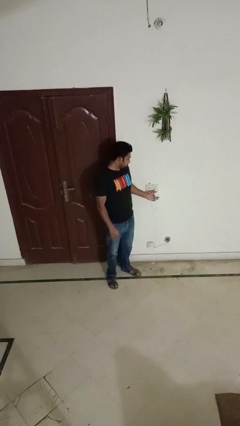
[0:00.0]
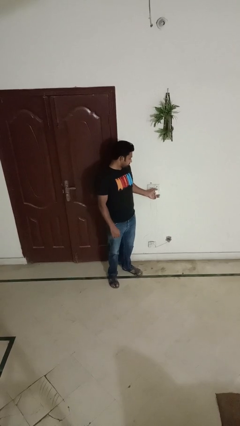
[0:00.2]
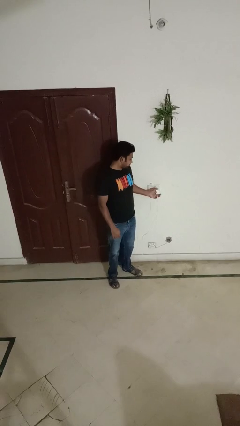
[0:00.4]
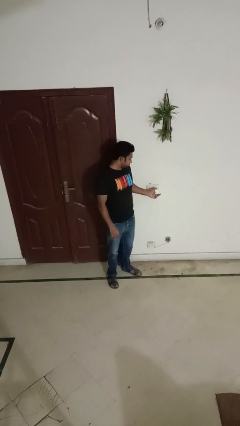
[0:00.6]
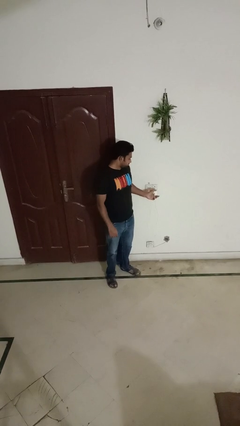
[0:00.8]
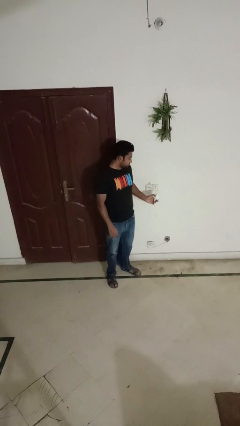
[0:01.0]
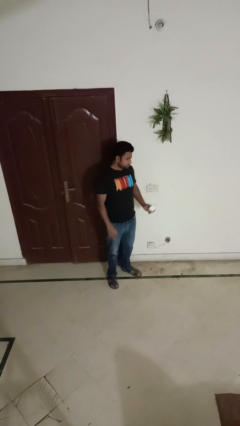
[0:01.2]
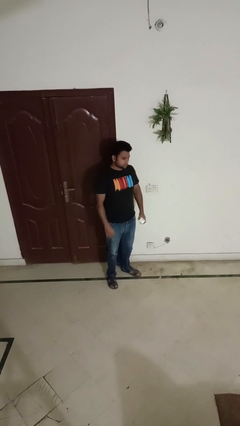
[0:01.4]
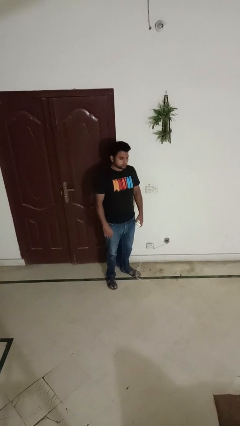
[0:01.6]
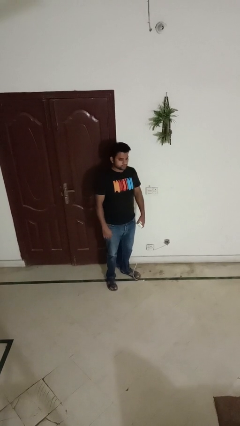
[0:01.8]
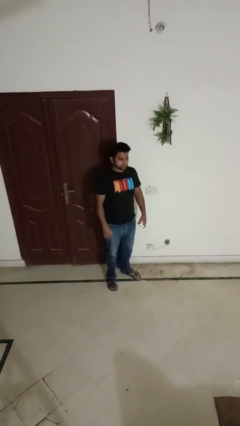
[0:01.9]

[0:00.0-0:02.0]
person unplugs from electrical socket

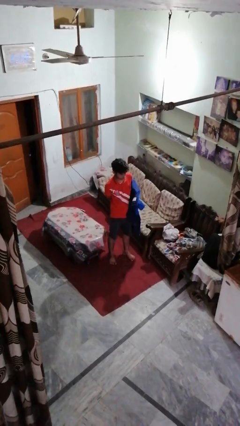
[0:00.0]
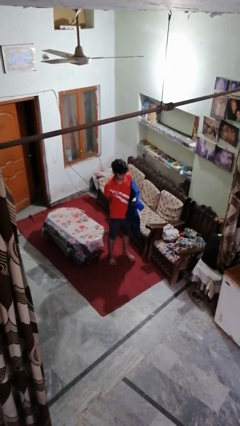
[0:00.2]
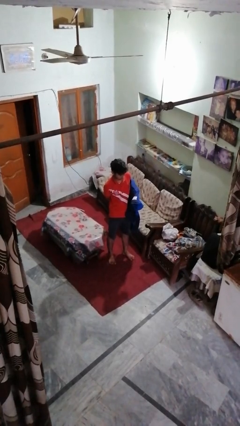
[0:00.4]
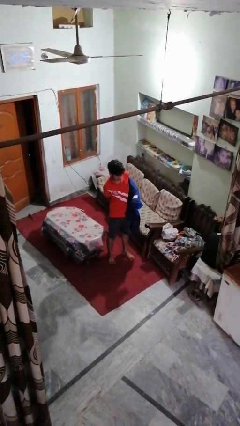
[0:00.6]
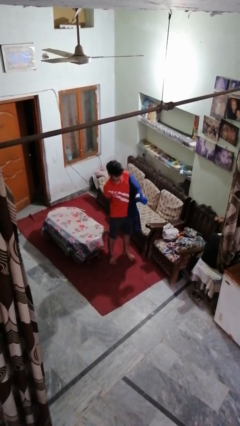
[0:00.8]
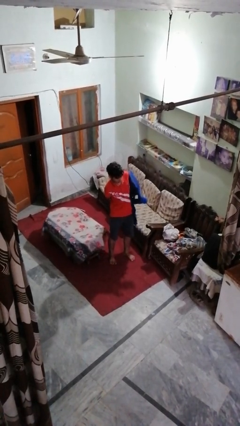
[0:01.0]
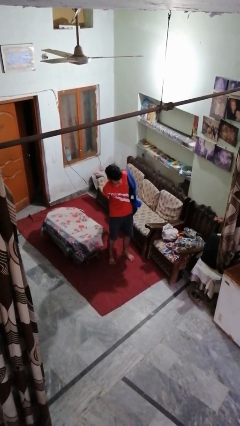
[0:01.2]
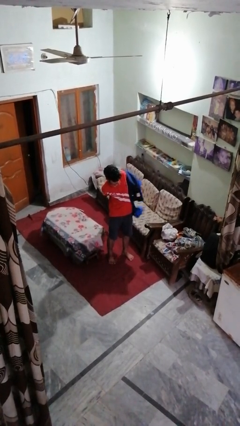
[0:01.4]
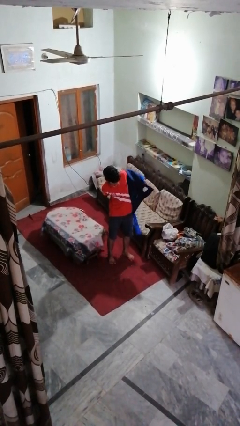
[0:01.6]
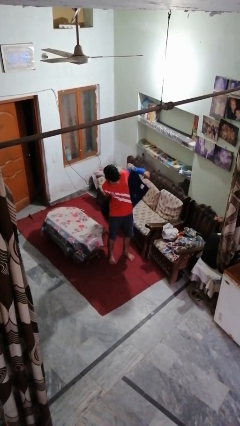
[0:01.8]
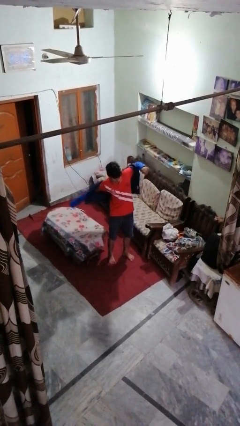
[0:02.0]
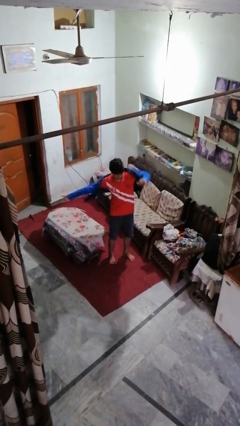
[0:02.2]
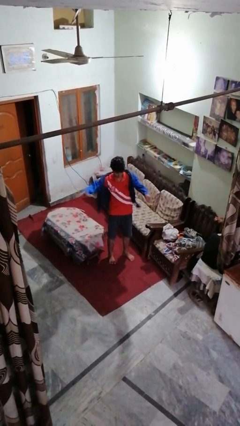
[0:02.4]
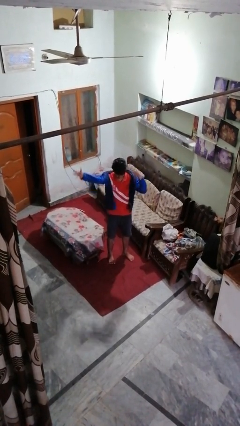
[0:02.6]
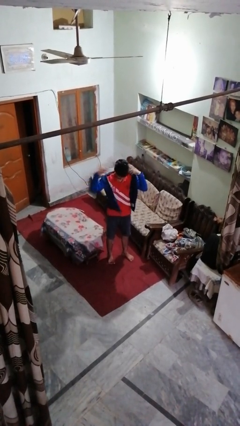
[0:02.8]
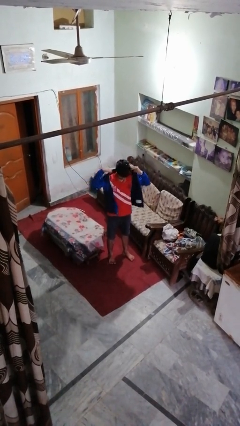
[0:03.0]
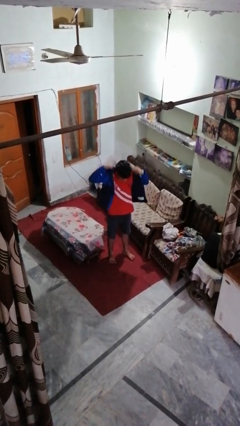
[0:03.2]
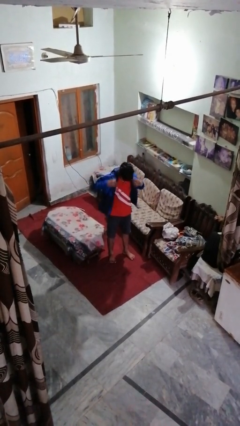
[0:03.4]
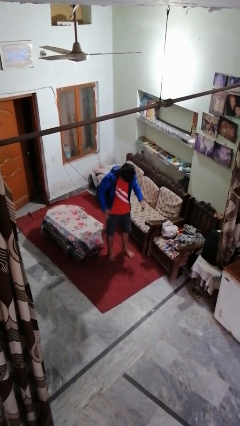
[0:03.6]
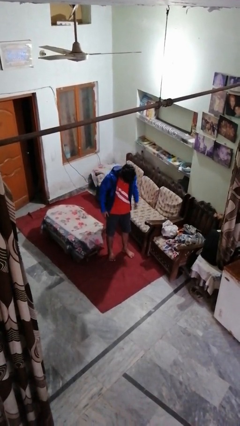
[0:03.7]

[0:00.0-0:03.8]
person puts on jacket

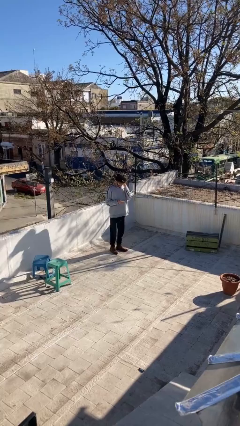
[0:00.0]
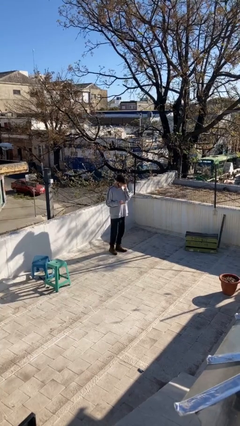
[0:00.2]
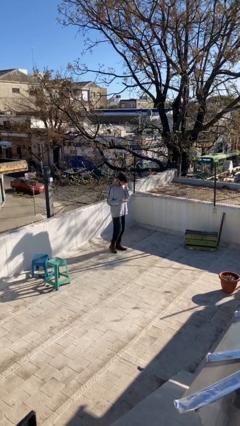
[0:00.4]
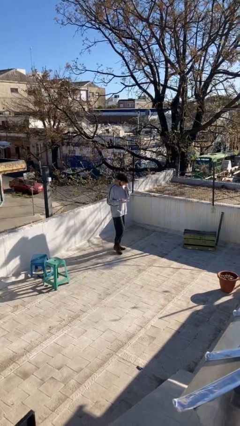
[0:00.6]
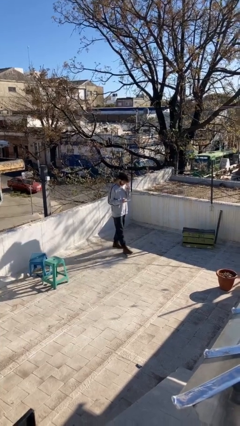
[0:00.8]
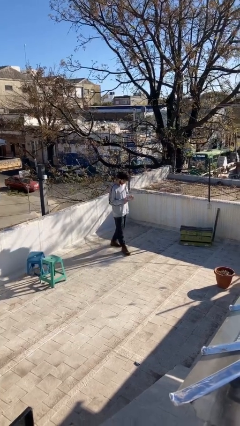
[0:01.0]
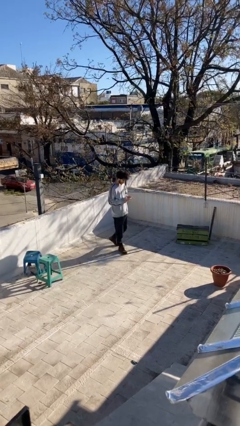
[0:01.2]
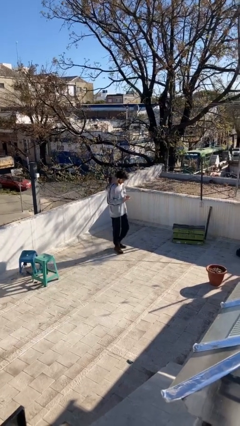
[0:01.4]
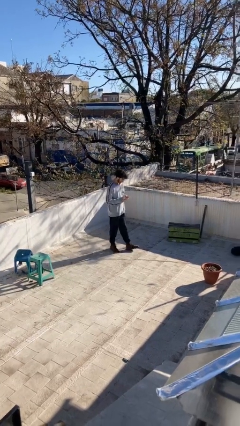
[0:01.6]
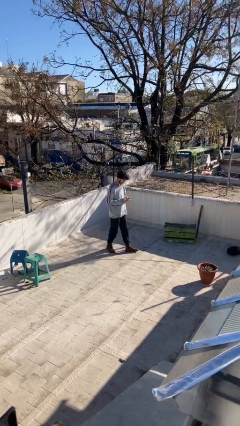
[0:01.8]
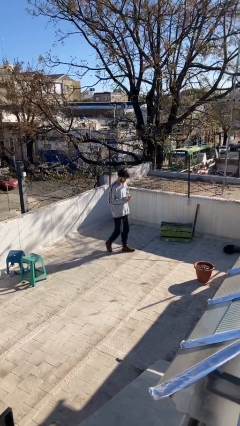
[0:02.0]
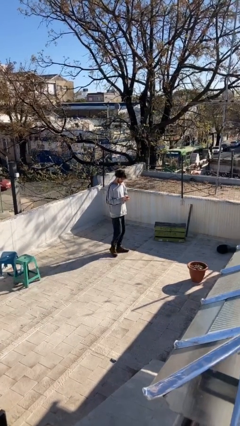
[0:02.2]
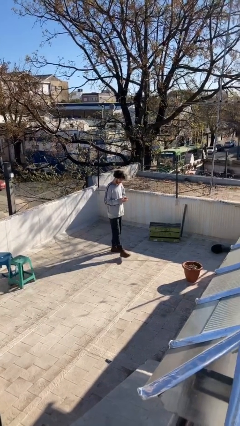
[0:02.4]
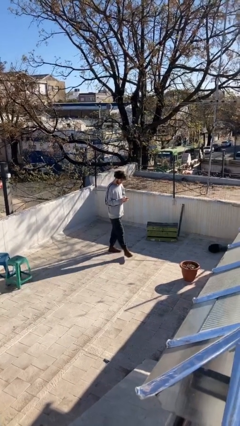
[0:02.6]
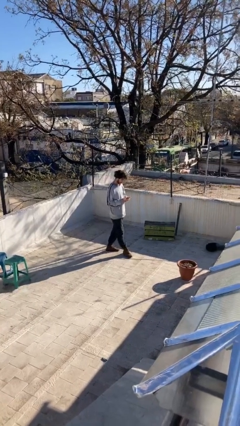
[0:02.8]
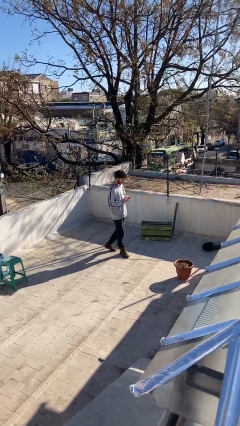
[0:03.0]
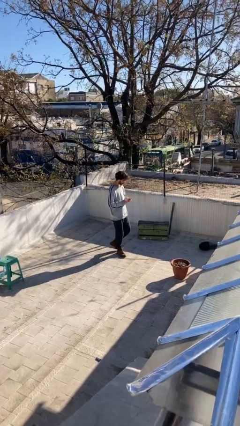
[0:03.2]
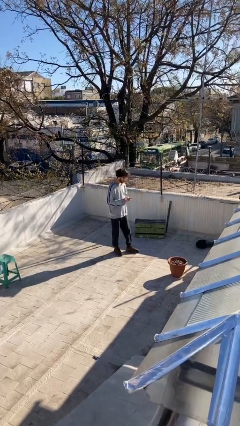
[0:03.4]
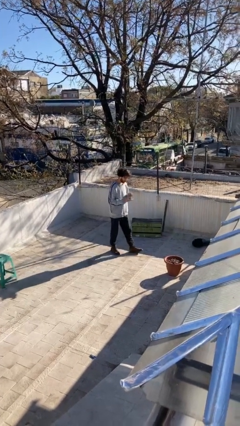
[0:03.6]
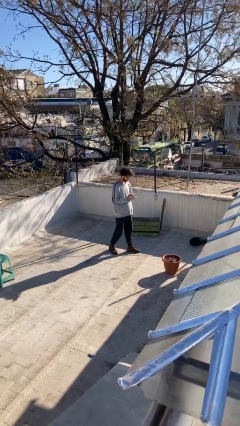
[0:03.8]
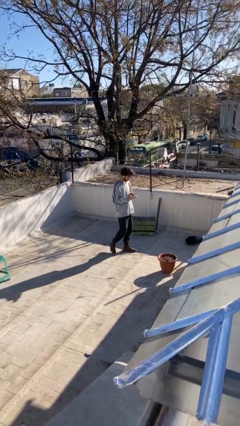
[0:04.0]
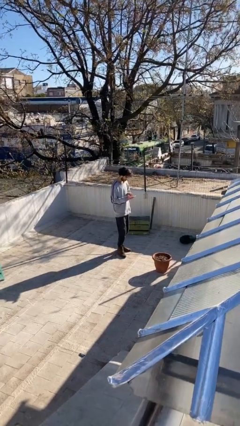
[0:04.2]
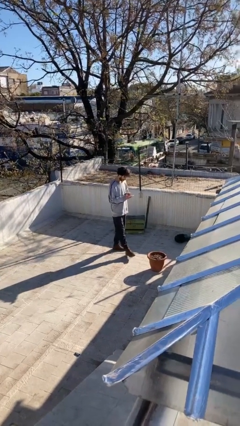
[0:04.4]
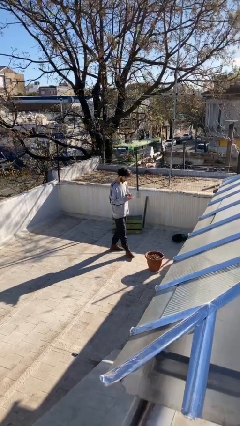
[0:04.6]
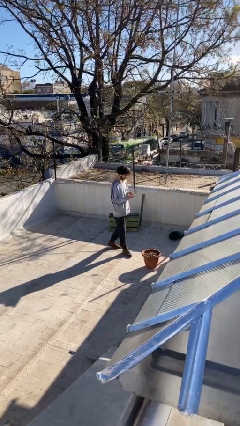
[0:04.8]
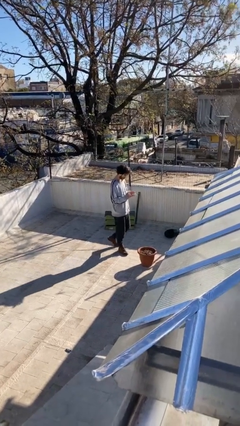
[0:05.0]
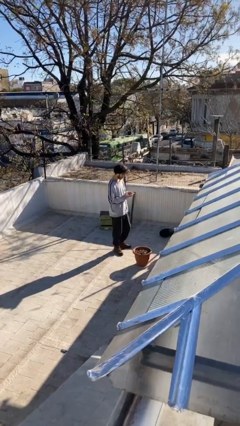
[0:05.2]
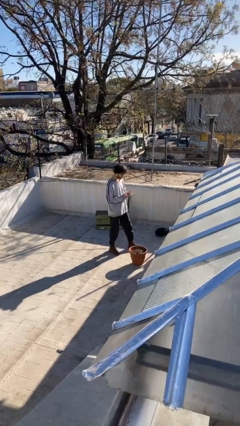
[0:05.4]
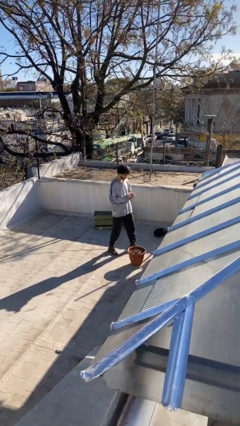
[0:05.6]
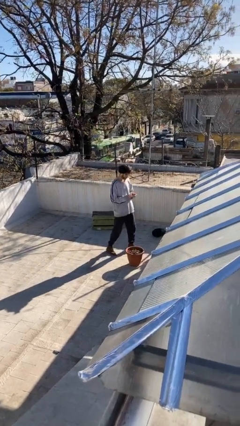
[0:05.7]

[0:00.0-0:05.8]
person texts on phone

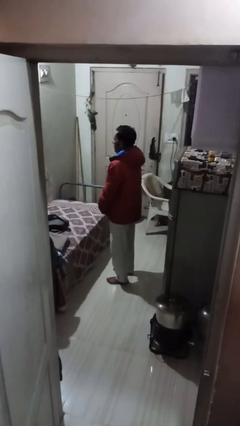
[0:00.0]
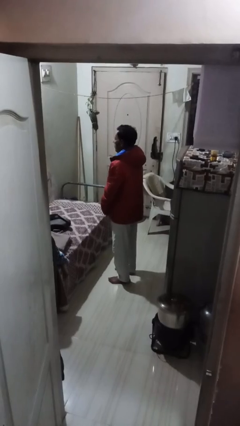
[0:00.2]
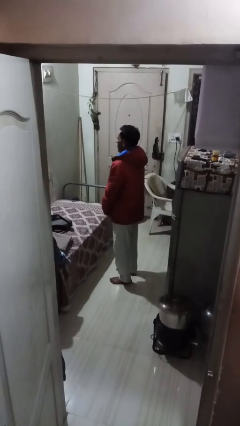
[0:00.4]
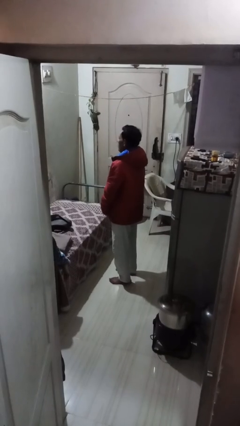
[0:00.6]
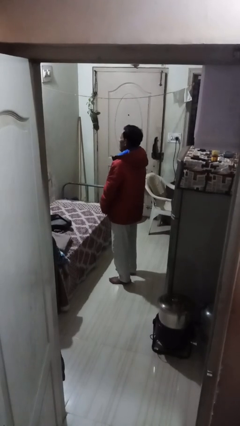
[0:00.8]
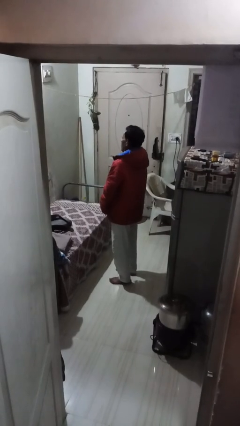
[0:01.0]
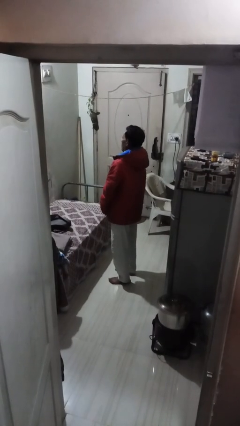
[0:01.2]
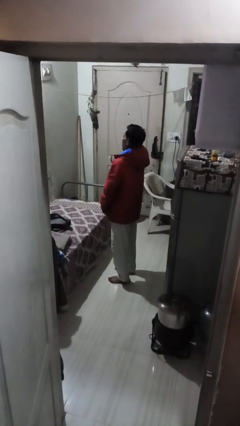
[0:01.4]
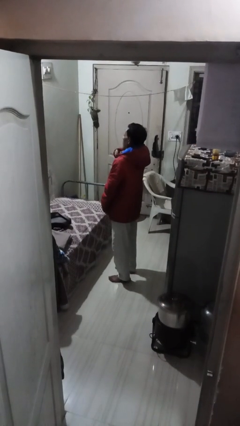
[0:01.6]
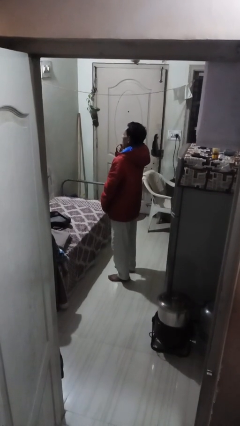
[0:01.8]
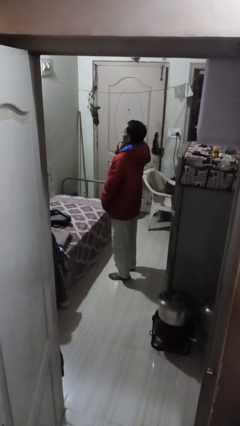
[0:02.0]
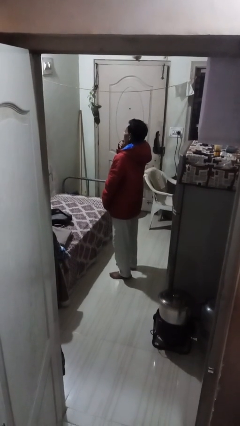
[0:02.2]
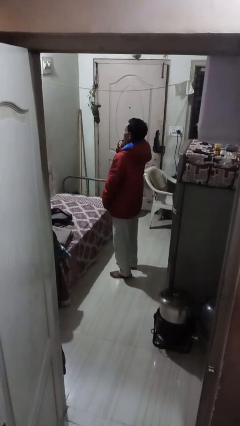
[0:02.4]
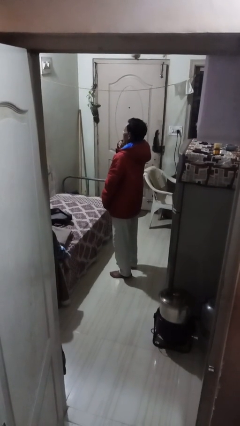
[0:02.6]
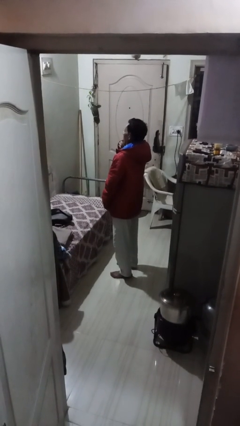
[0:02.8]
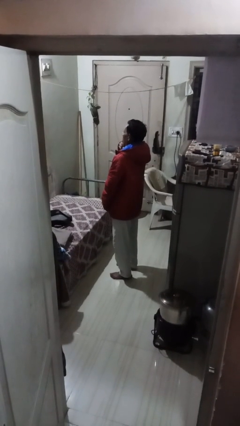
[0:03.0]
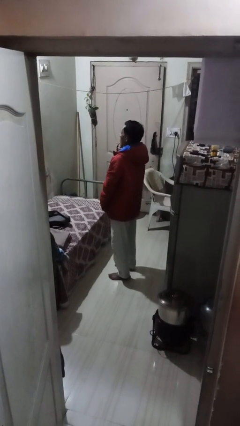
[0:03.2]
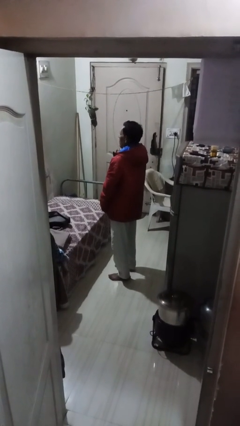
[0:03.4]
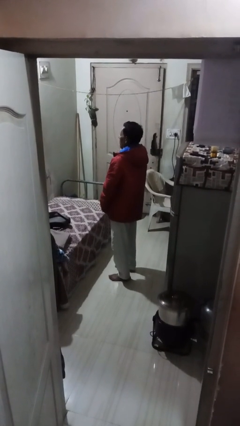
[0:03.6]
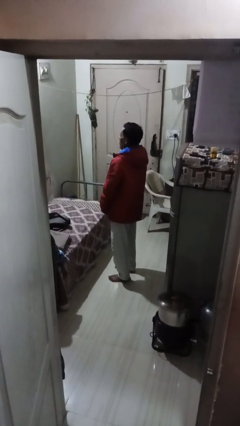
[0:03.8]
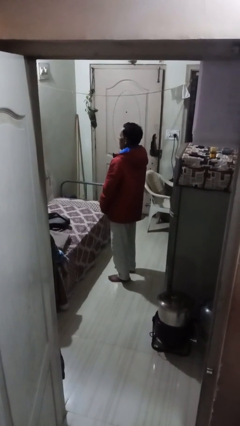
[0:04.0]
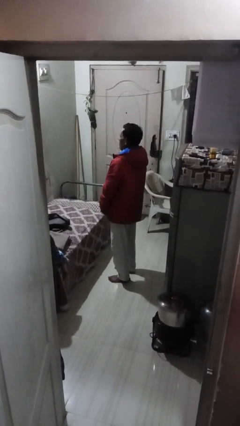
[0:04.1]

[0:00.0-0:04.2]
person zips up jacket

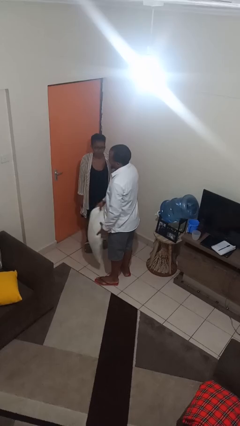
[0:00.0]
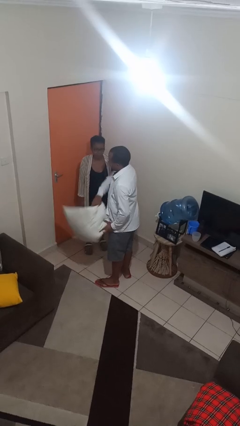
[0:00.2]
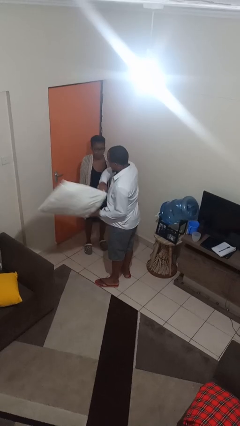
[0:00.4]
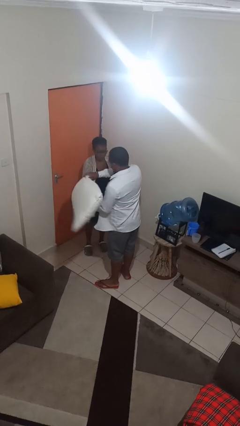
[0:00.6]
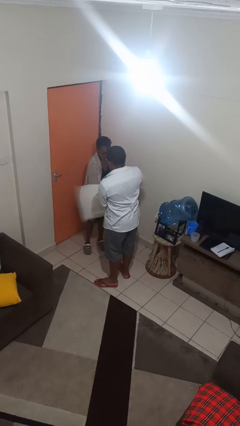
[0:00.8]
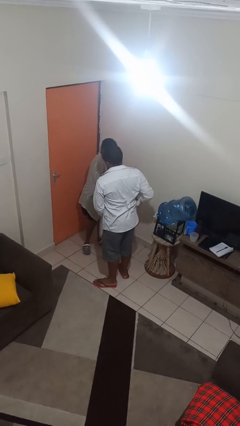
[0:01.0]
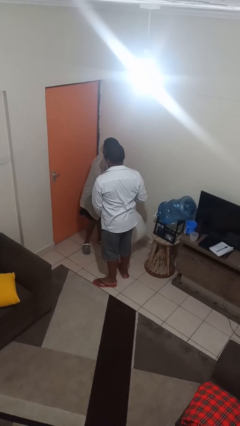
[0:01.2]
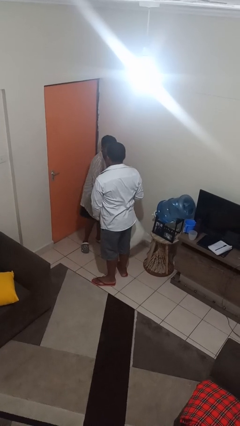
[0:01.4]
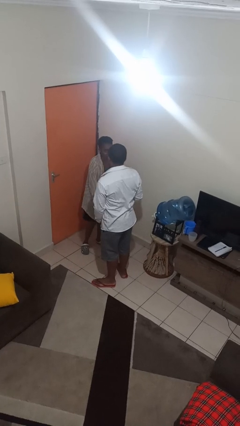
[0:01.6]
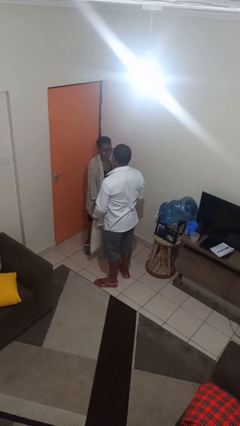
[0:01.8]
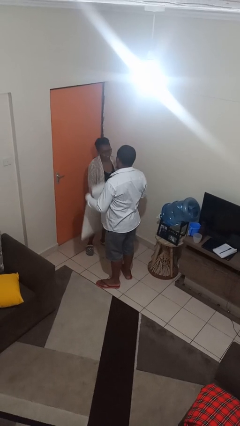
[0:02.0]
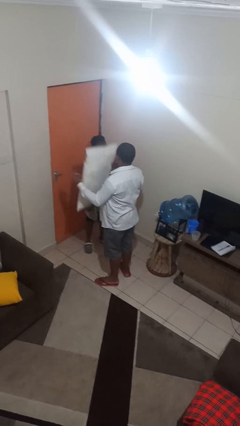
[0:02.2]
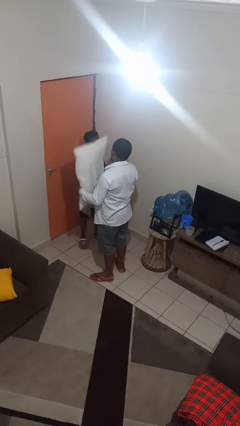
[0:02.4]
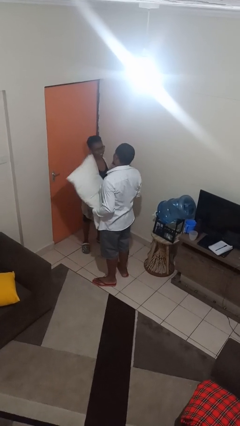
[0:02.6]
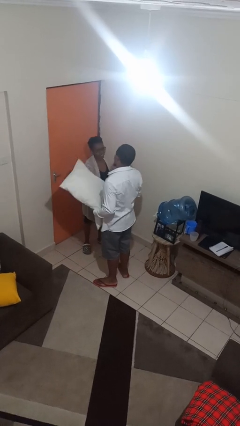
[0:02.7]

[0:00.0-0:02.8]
person hits person with pillow
